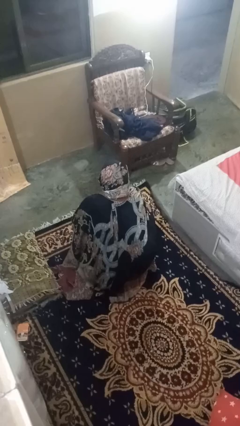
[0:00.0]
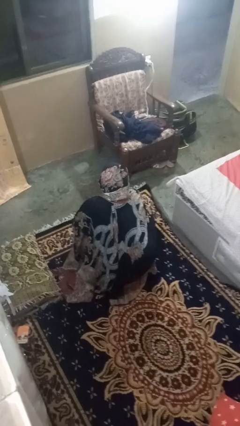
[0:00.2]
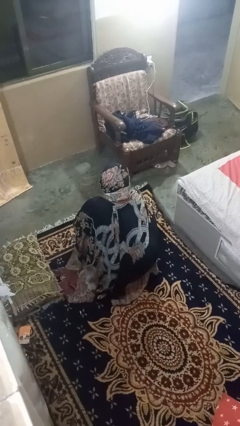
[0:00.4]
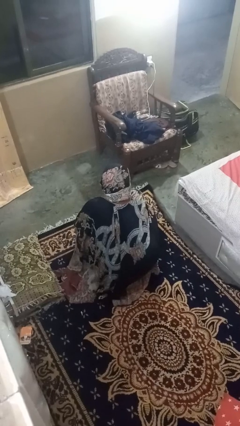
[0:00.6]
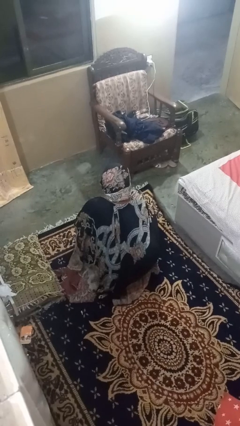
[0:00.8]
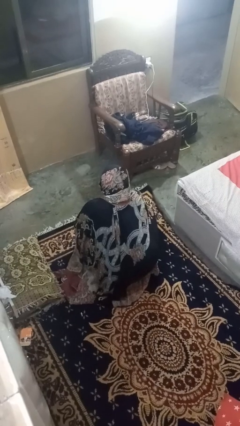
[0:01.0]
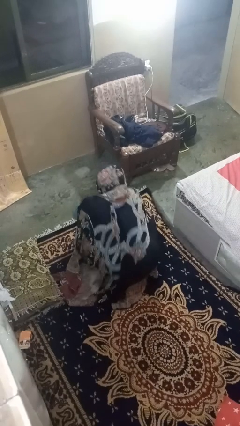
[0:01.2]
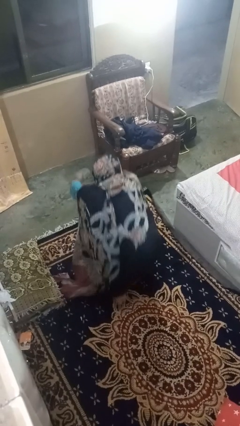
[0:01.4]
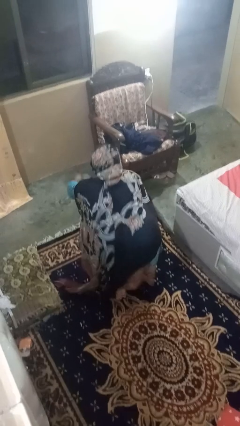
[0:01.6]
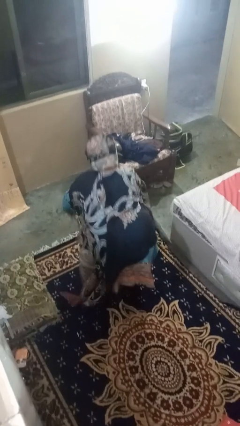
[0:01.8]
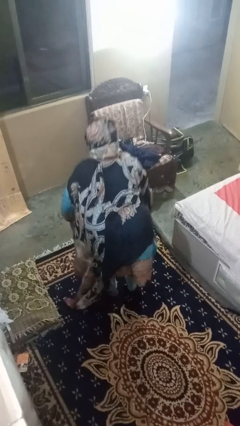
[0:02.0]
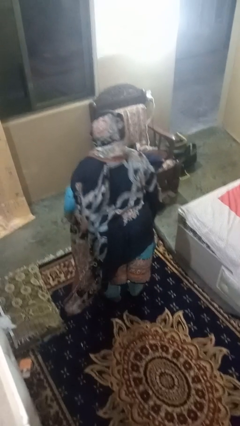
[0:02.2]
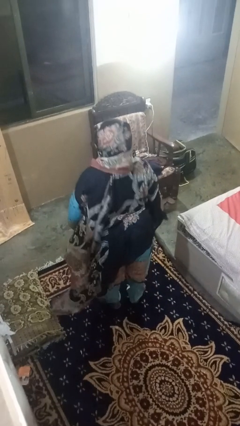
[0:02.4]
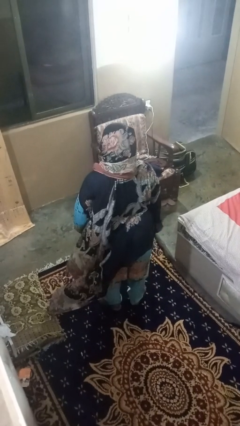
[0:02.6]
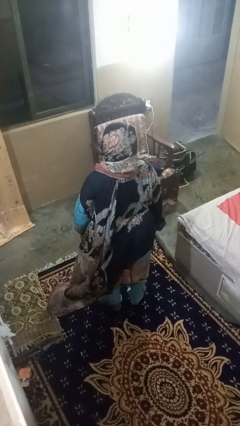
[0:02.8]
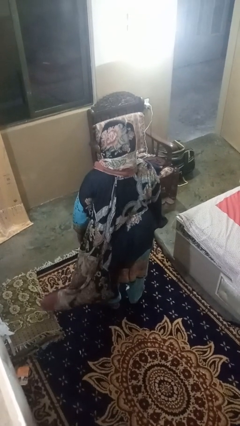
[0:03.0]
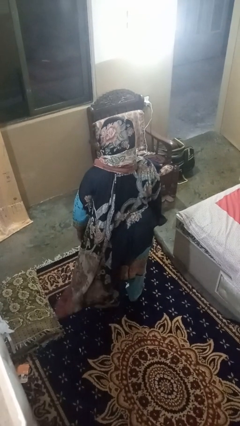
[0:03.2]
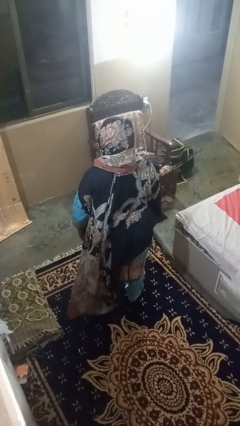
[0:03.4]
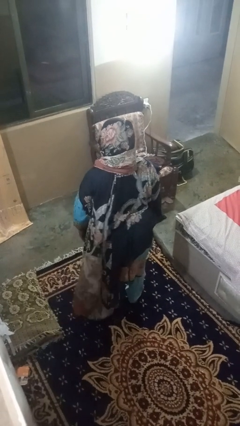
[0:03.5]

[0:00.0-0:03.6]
person stands up

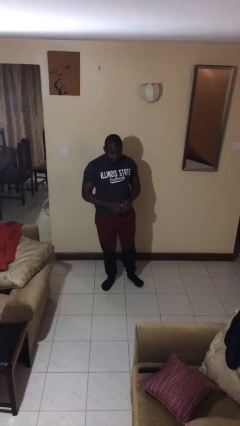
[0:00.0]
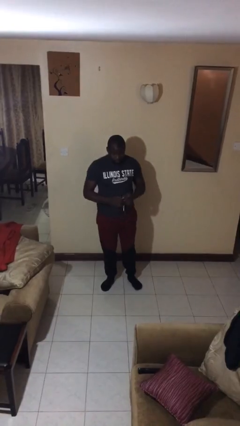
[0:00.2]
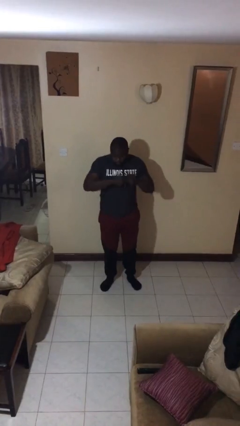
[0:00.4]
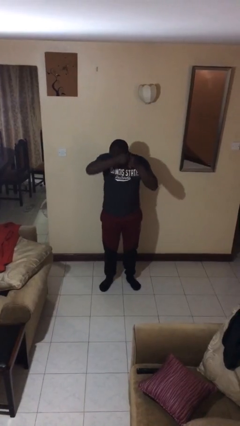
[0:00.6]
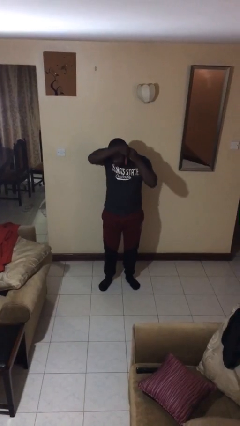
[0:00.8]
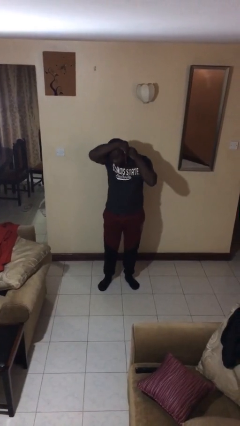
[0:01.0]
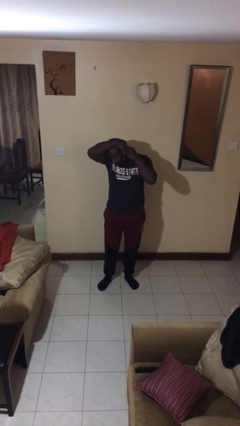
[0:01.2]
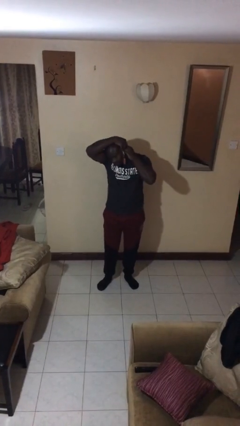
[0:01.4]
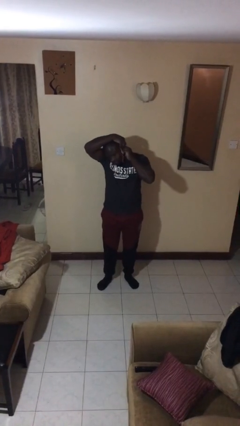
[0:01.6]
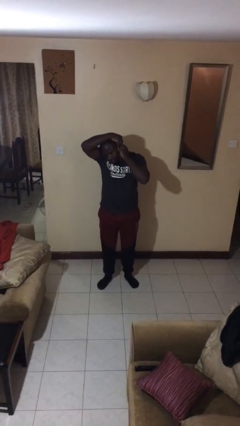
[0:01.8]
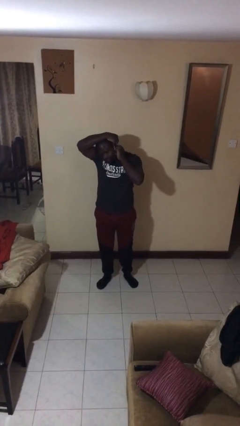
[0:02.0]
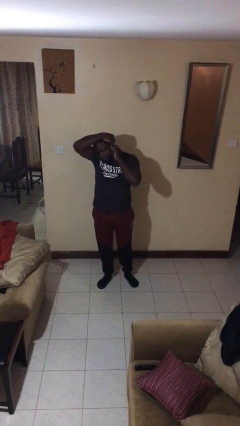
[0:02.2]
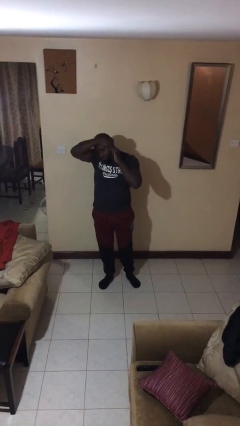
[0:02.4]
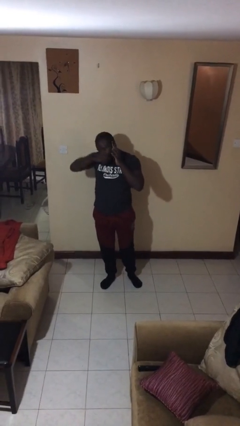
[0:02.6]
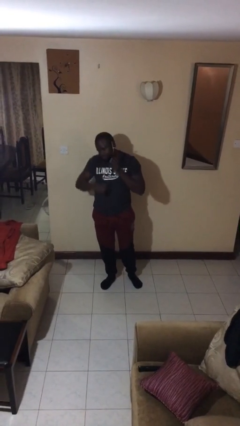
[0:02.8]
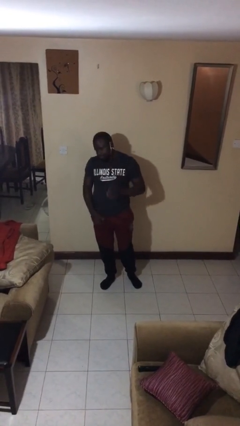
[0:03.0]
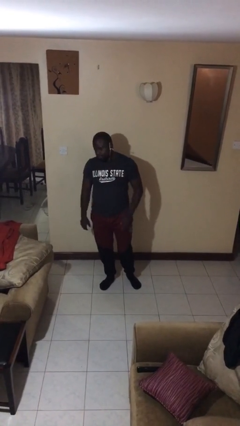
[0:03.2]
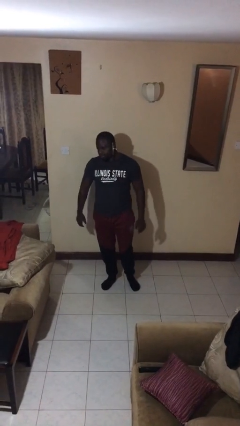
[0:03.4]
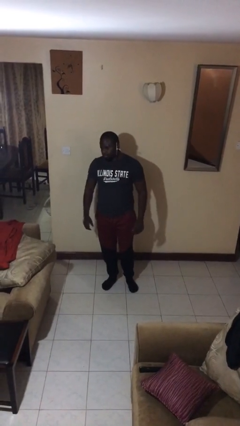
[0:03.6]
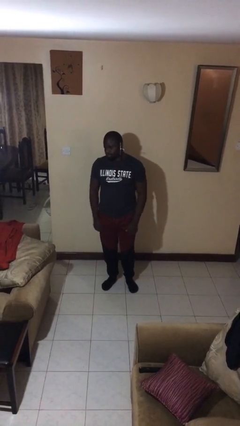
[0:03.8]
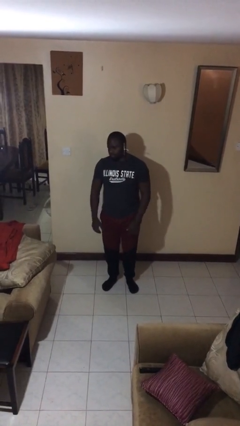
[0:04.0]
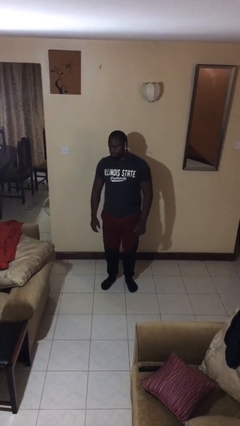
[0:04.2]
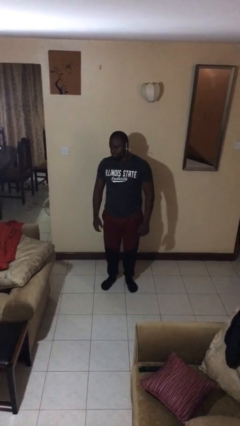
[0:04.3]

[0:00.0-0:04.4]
person puts on earrings

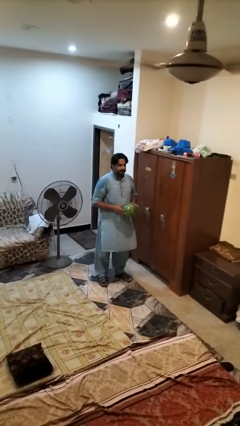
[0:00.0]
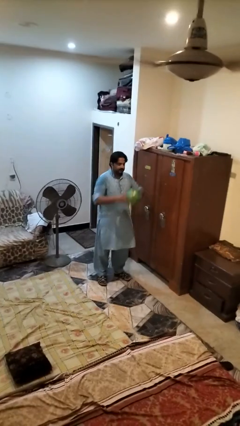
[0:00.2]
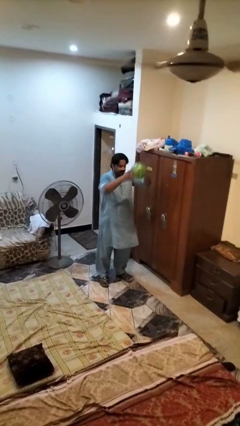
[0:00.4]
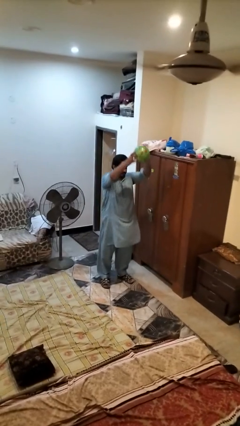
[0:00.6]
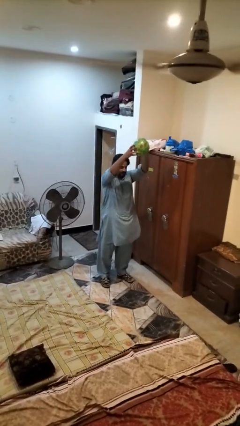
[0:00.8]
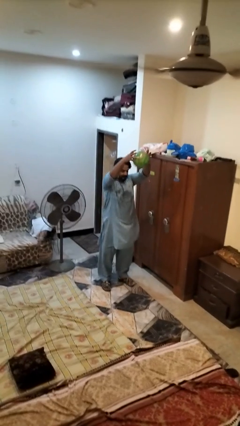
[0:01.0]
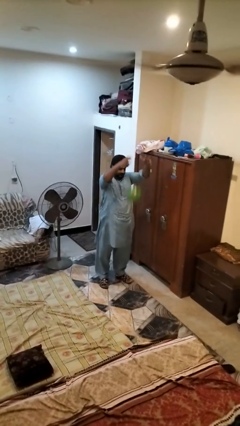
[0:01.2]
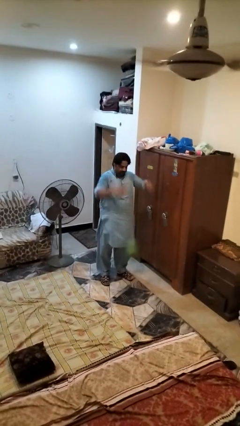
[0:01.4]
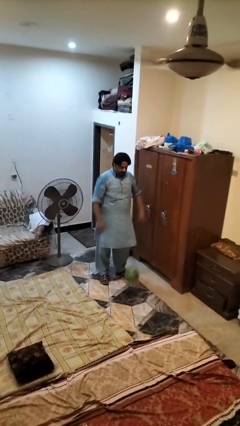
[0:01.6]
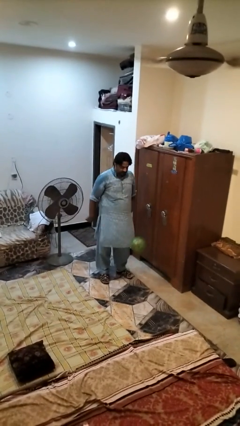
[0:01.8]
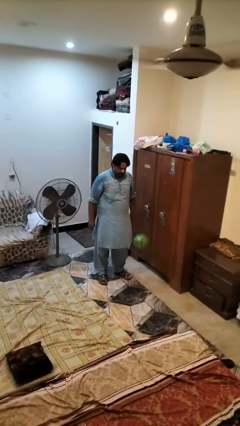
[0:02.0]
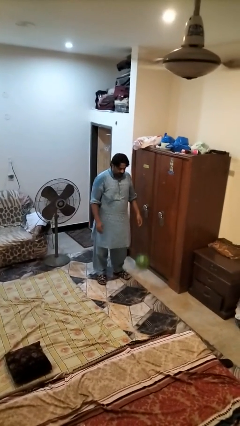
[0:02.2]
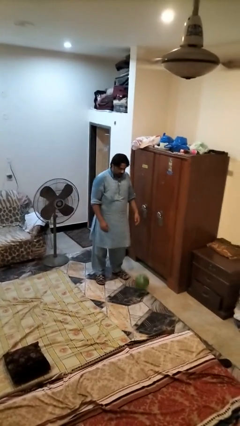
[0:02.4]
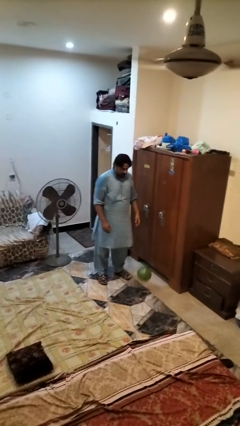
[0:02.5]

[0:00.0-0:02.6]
person drops object

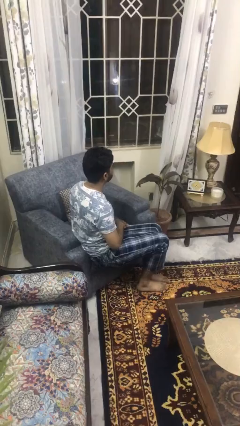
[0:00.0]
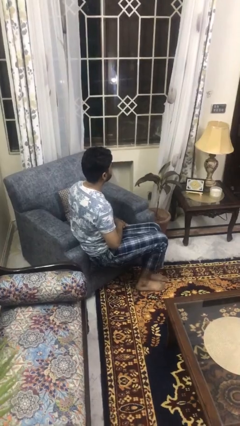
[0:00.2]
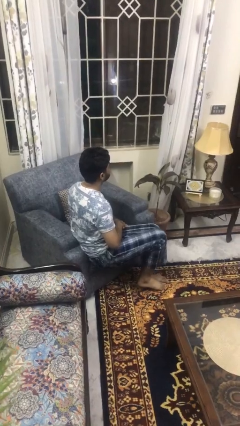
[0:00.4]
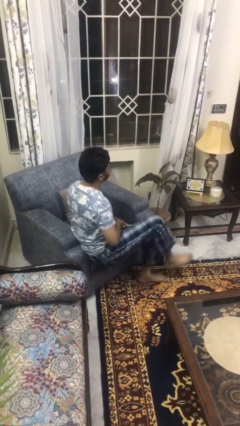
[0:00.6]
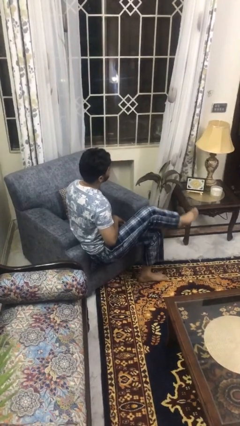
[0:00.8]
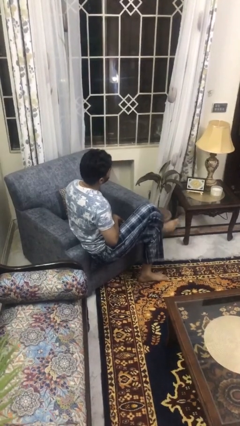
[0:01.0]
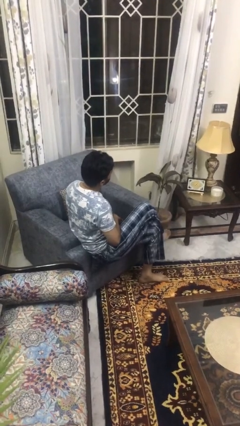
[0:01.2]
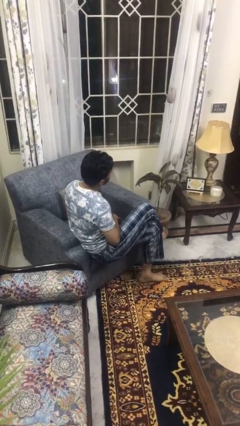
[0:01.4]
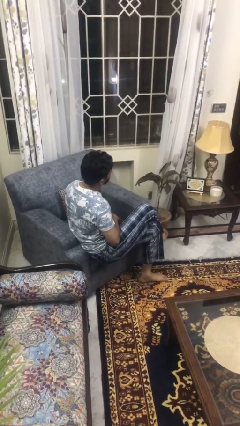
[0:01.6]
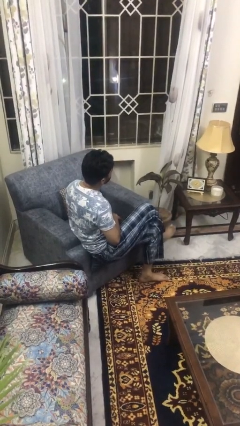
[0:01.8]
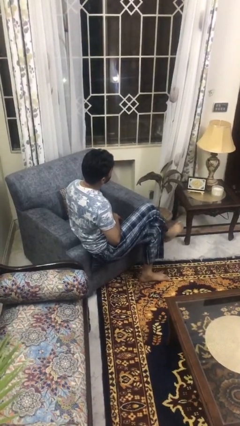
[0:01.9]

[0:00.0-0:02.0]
person crosses legs

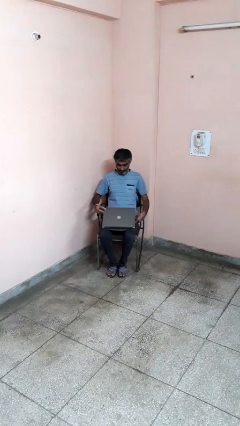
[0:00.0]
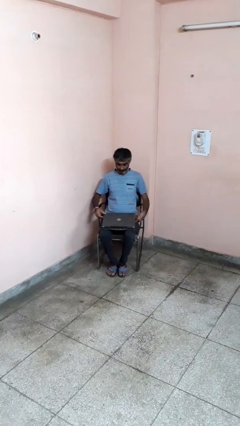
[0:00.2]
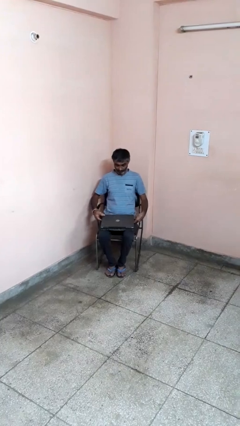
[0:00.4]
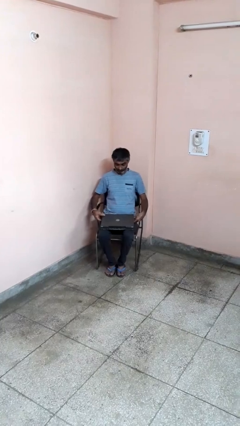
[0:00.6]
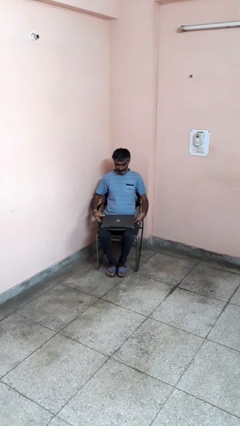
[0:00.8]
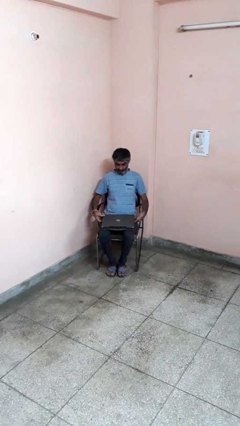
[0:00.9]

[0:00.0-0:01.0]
person closes laptop

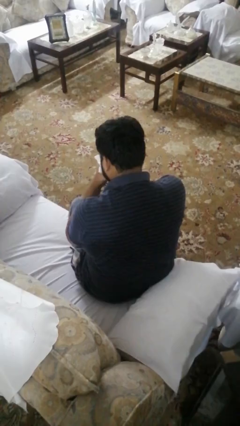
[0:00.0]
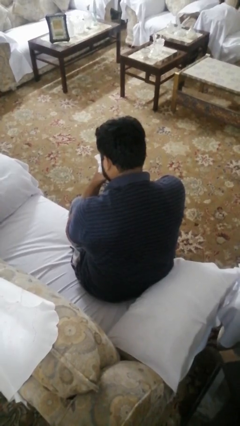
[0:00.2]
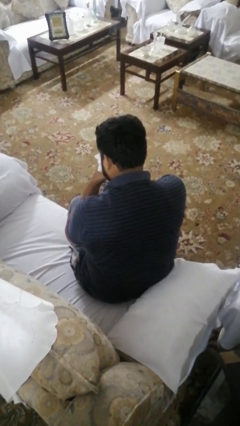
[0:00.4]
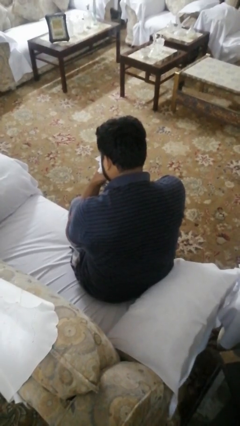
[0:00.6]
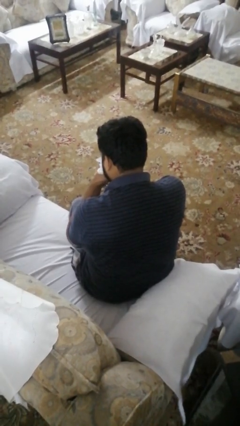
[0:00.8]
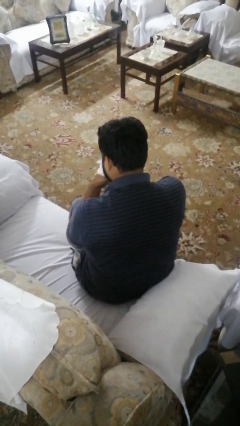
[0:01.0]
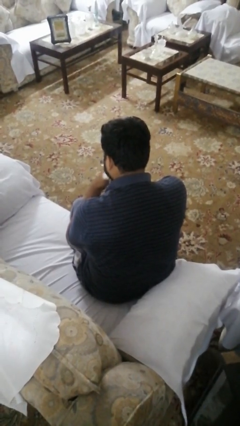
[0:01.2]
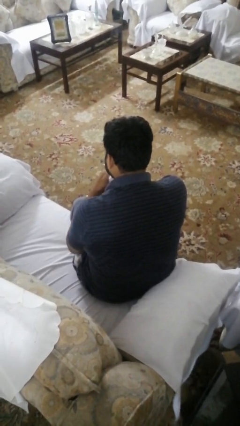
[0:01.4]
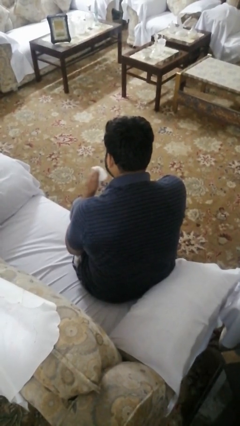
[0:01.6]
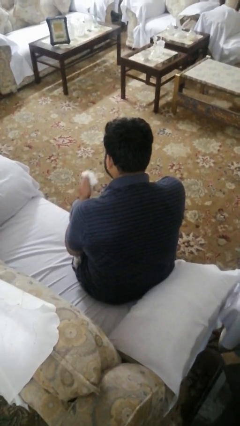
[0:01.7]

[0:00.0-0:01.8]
person blows nose

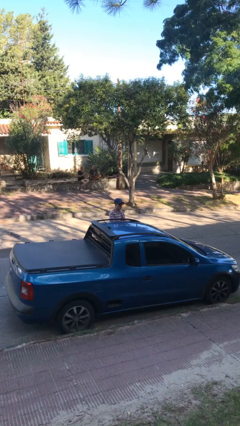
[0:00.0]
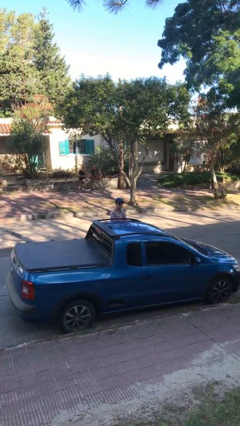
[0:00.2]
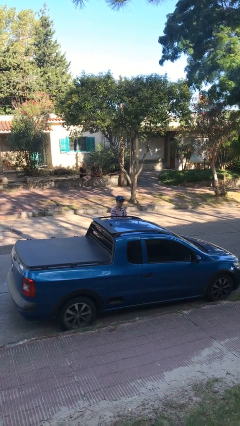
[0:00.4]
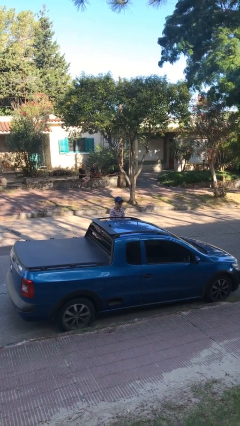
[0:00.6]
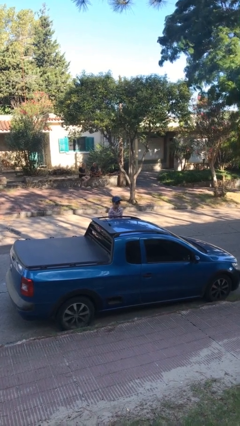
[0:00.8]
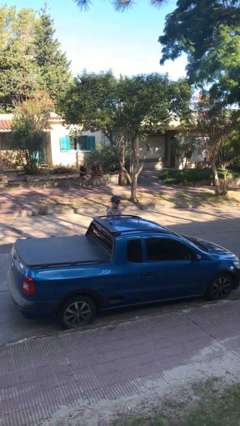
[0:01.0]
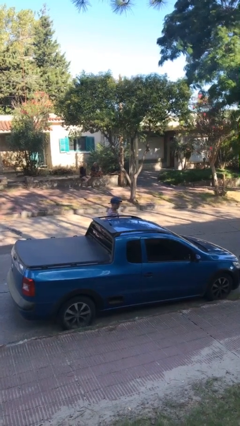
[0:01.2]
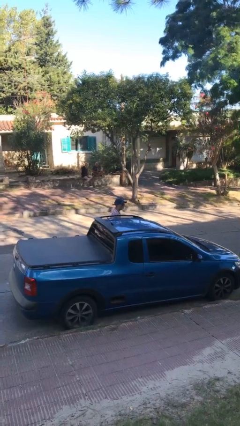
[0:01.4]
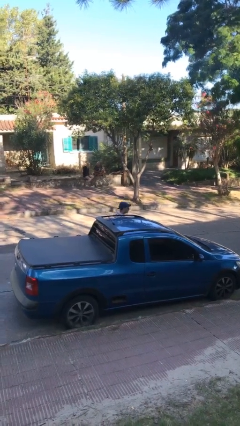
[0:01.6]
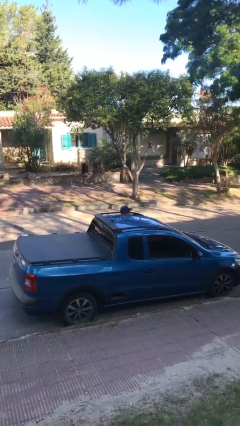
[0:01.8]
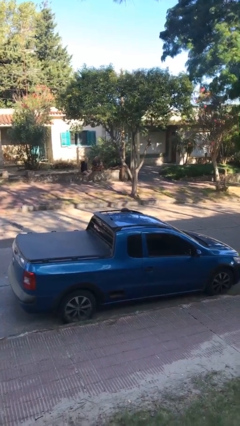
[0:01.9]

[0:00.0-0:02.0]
person enters car
